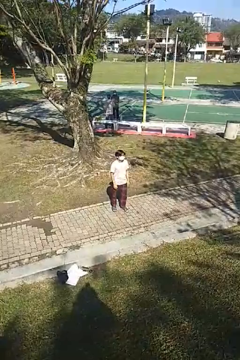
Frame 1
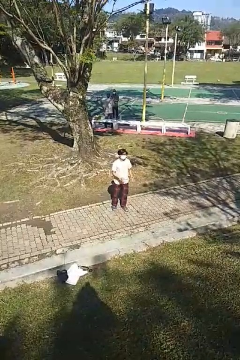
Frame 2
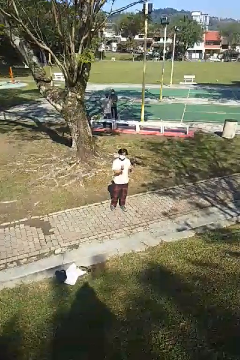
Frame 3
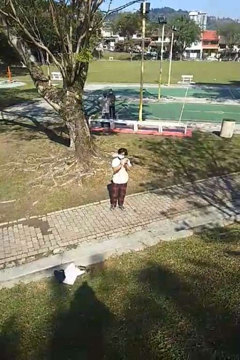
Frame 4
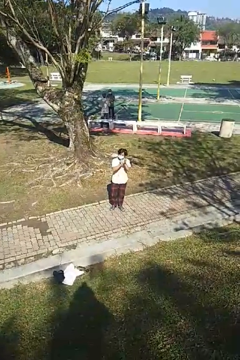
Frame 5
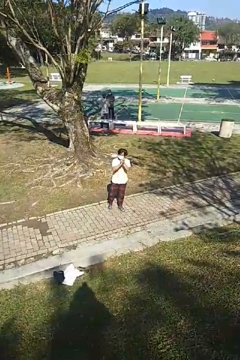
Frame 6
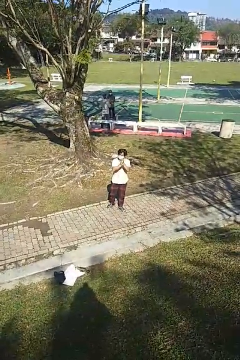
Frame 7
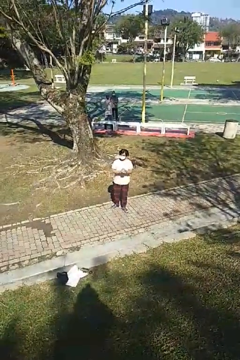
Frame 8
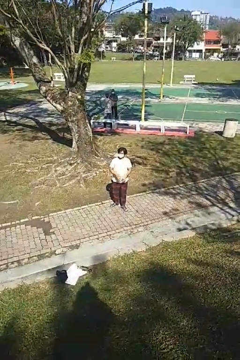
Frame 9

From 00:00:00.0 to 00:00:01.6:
person claps hands

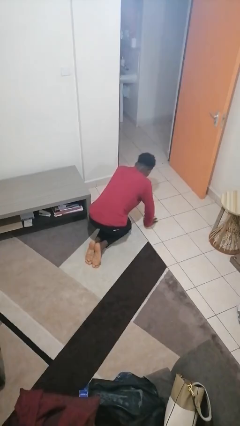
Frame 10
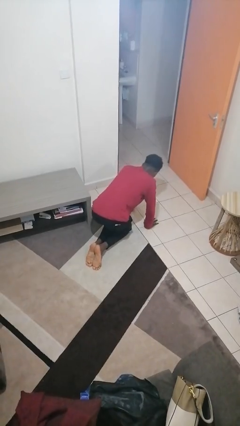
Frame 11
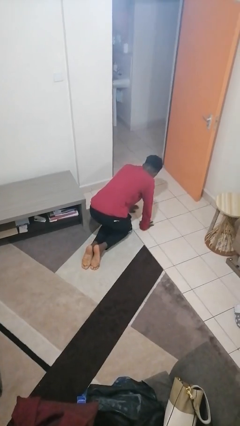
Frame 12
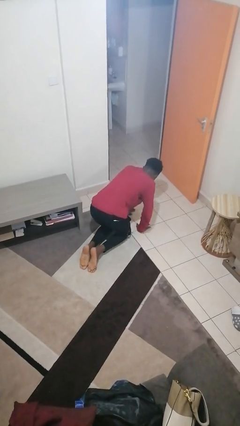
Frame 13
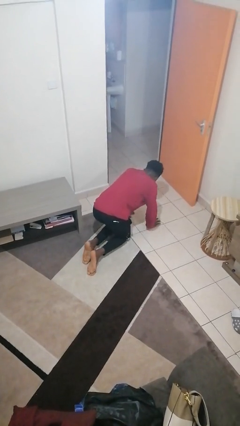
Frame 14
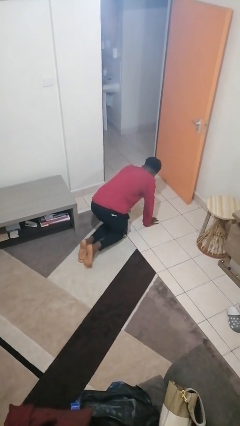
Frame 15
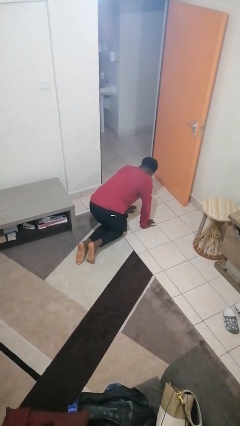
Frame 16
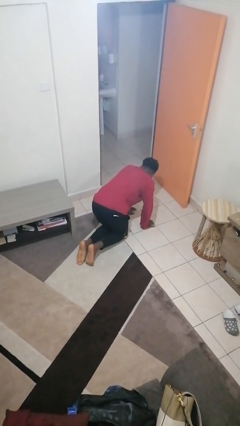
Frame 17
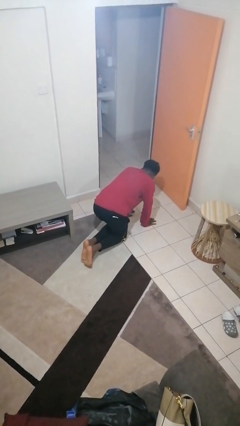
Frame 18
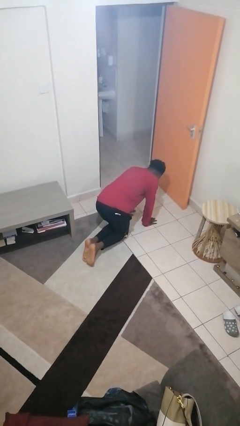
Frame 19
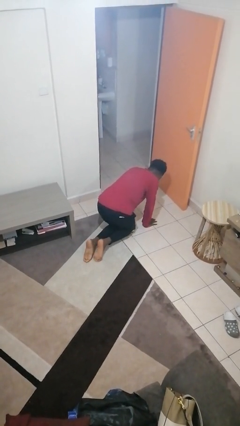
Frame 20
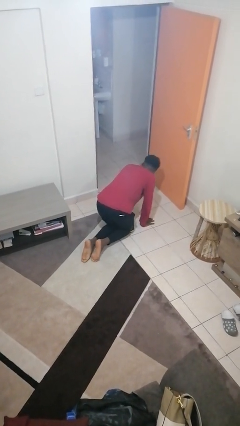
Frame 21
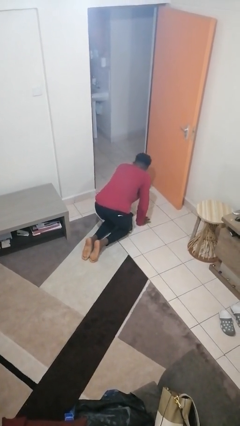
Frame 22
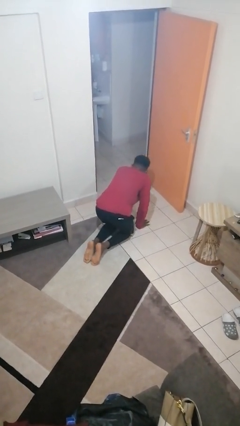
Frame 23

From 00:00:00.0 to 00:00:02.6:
person crawls

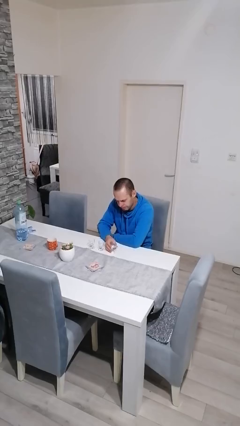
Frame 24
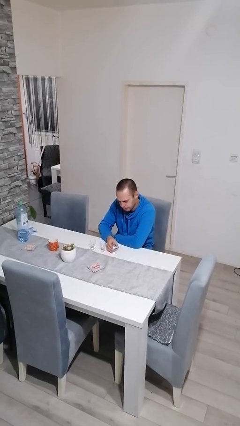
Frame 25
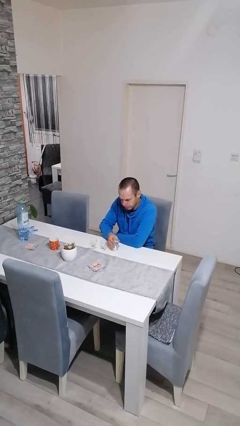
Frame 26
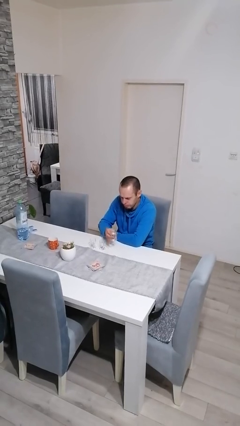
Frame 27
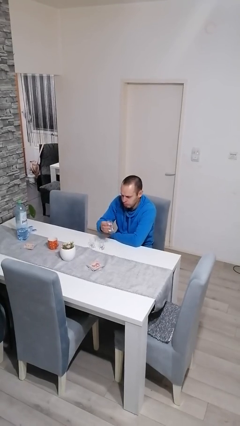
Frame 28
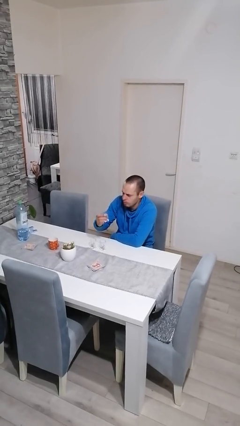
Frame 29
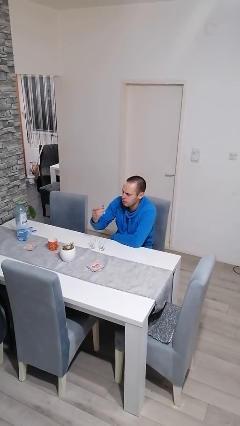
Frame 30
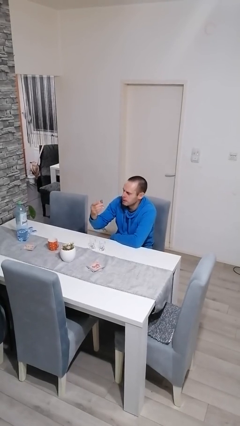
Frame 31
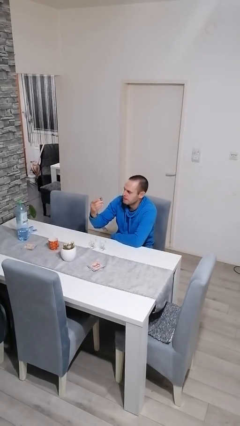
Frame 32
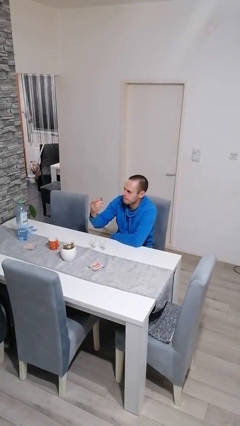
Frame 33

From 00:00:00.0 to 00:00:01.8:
person picks up object from table

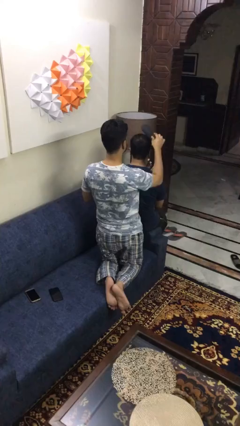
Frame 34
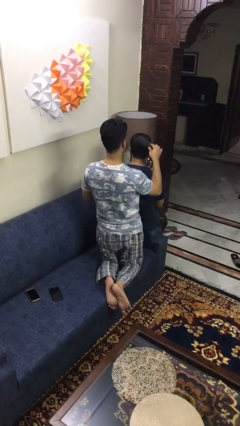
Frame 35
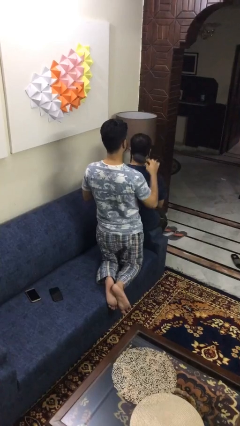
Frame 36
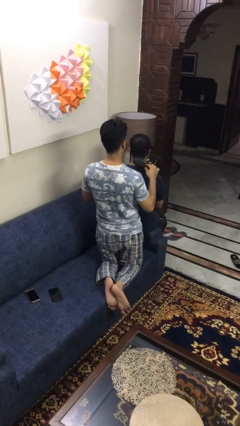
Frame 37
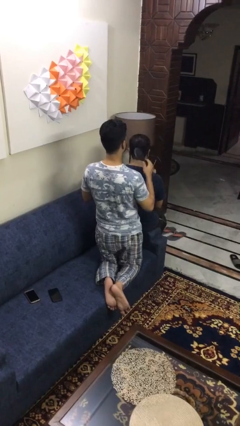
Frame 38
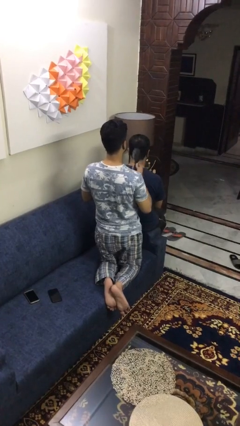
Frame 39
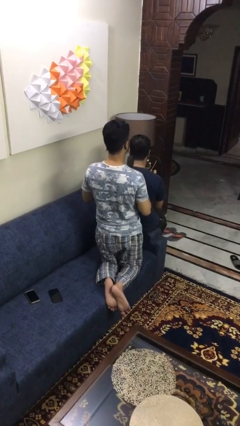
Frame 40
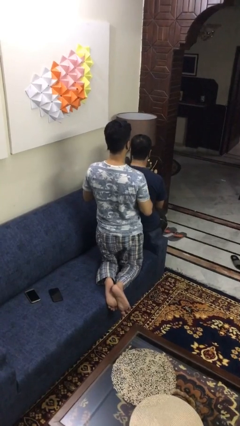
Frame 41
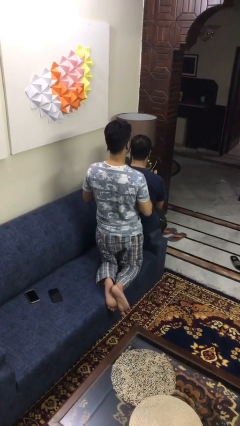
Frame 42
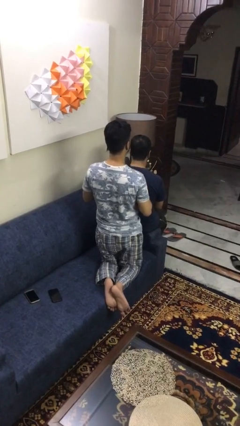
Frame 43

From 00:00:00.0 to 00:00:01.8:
person brushes hair of person

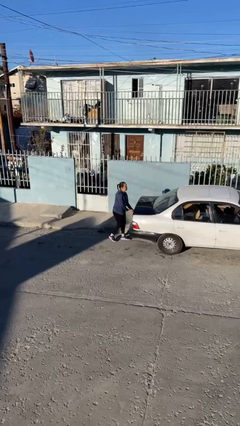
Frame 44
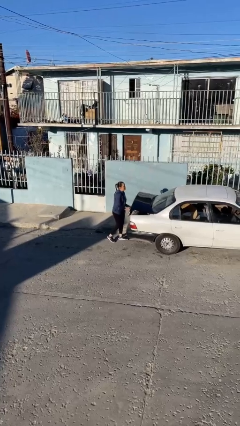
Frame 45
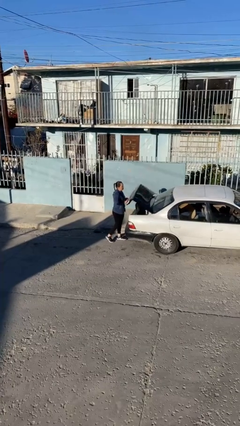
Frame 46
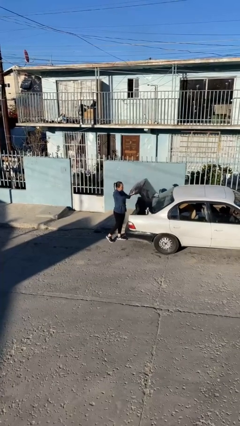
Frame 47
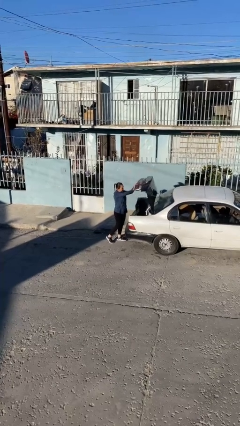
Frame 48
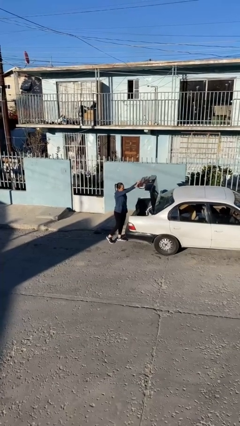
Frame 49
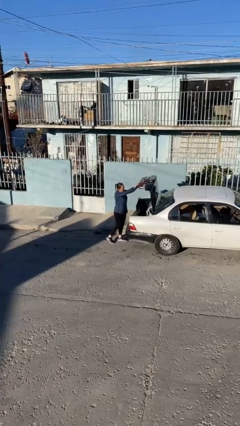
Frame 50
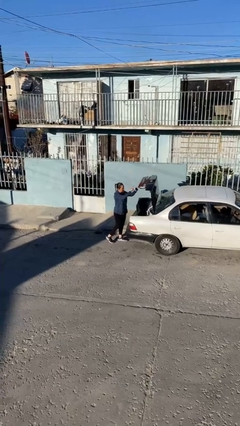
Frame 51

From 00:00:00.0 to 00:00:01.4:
person opens car trunk

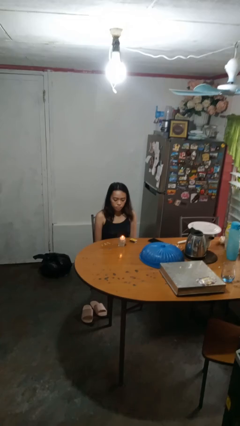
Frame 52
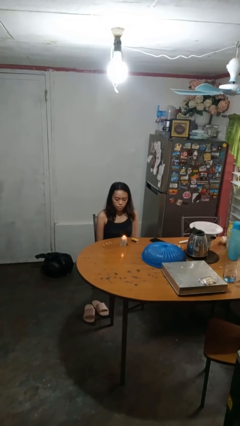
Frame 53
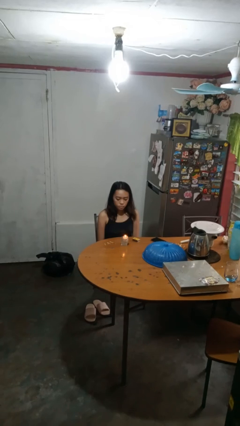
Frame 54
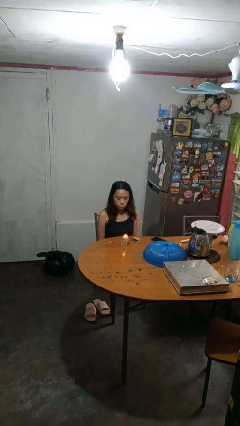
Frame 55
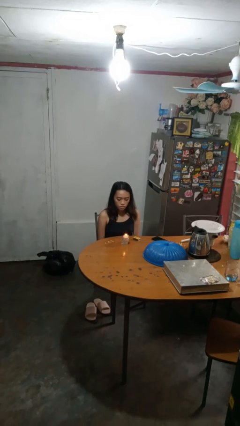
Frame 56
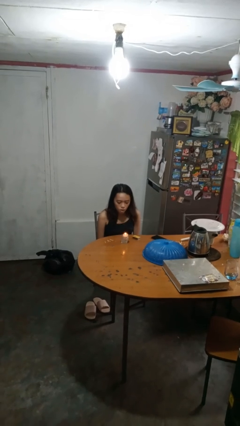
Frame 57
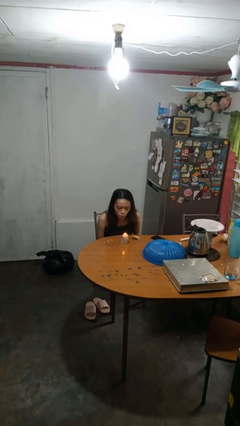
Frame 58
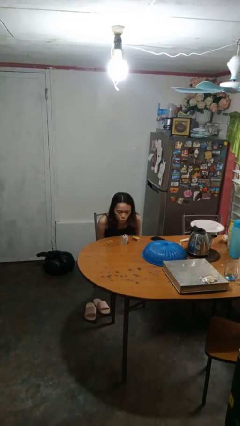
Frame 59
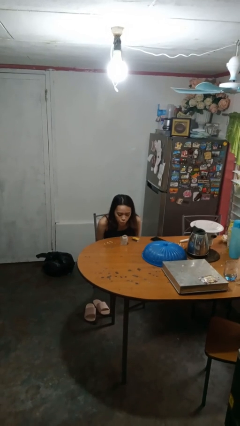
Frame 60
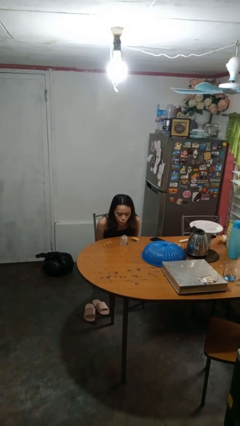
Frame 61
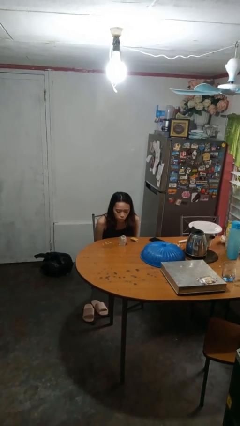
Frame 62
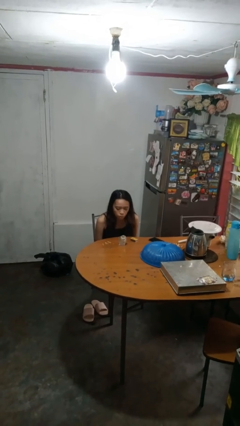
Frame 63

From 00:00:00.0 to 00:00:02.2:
person extinguishes candle

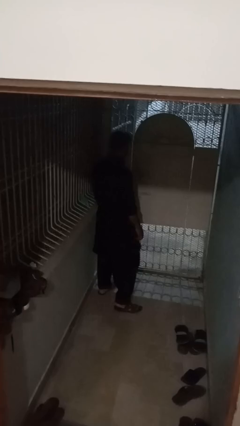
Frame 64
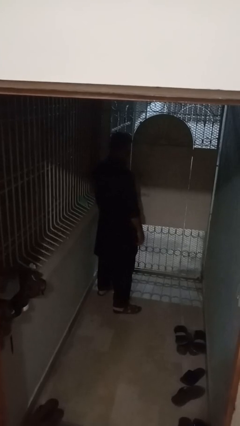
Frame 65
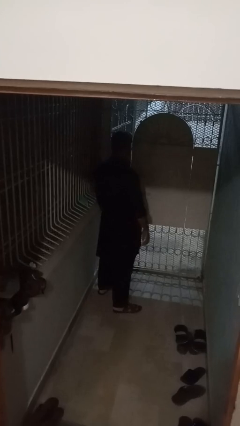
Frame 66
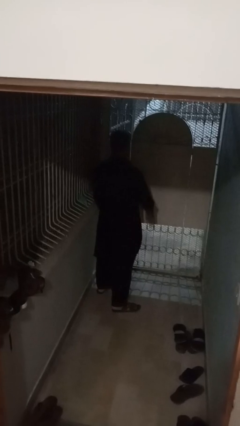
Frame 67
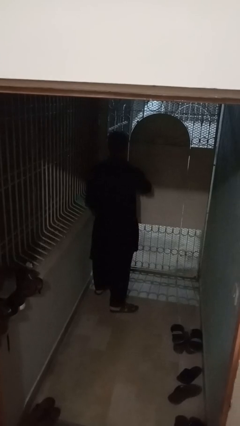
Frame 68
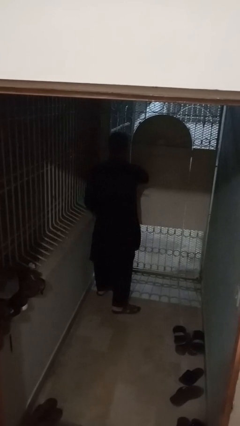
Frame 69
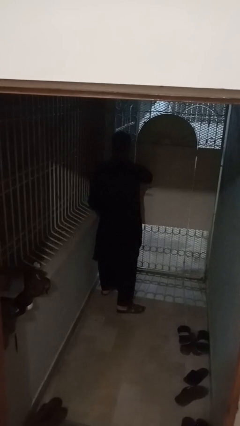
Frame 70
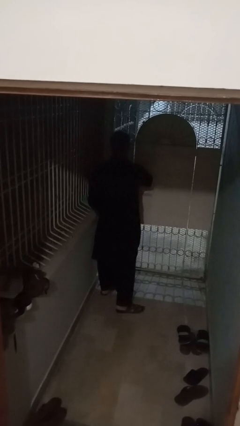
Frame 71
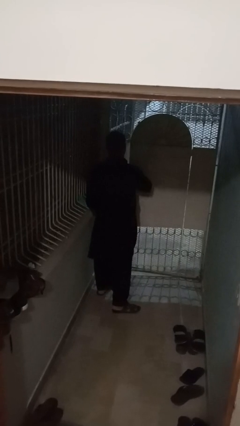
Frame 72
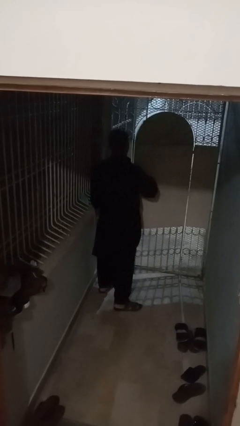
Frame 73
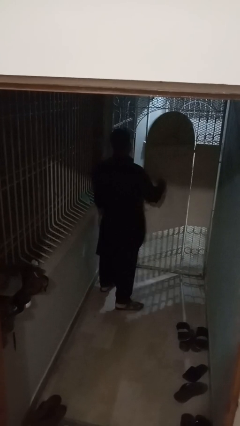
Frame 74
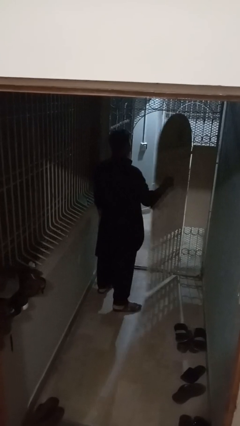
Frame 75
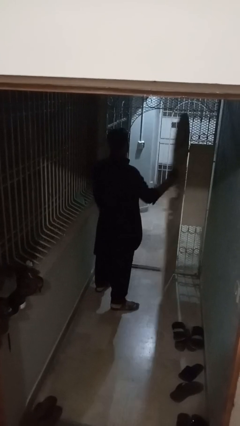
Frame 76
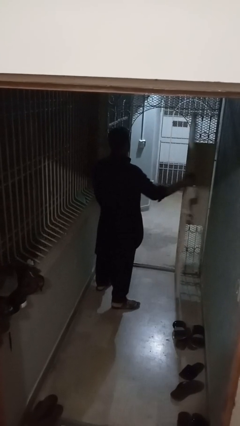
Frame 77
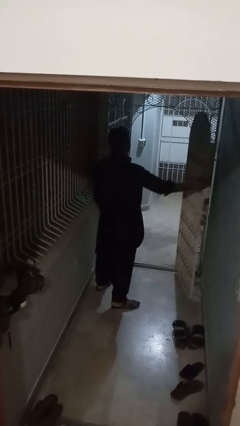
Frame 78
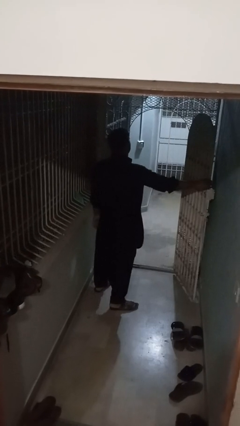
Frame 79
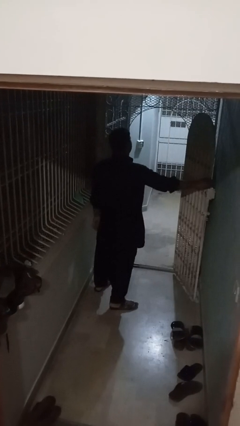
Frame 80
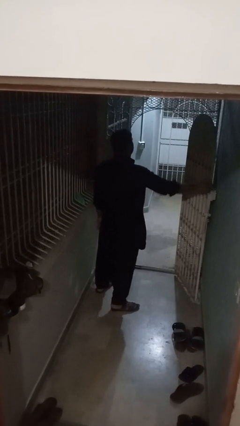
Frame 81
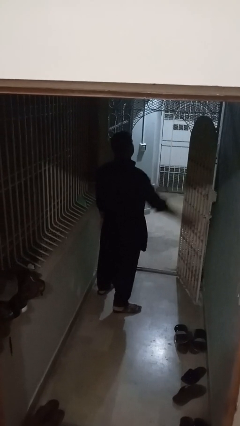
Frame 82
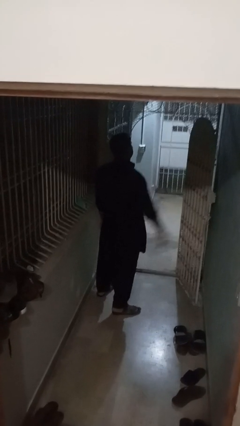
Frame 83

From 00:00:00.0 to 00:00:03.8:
person opens gate

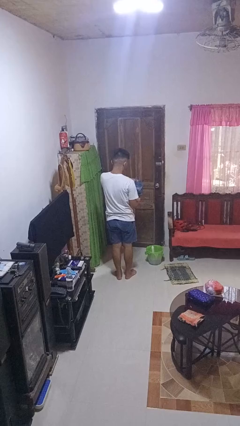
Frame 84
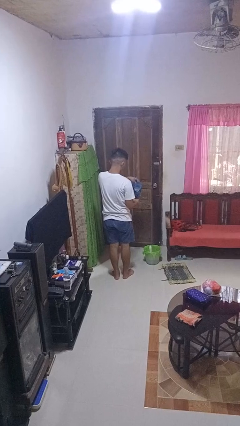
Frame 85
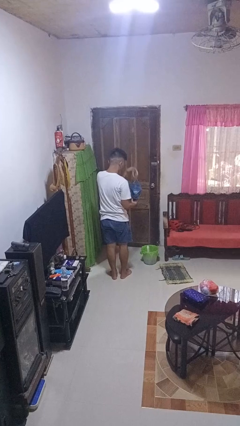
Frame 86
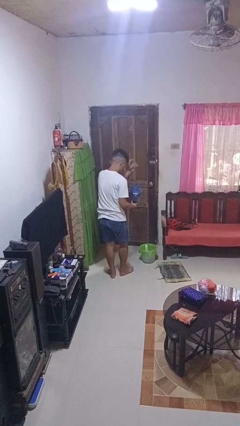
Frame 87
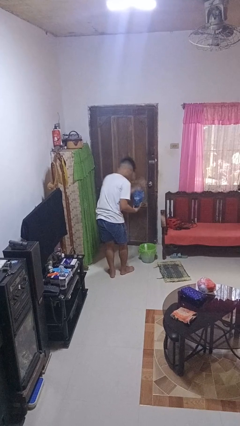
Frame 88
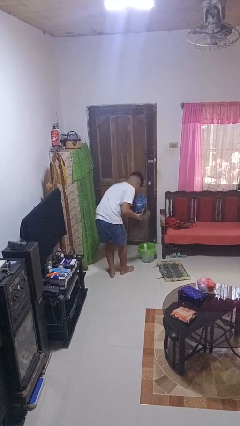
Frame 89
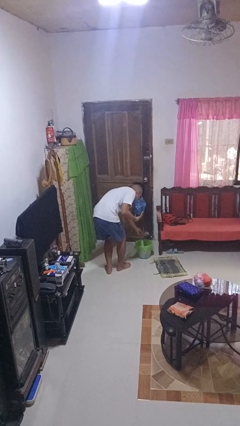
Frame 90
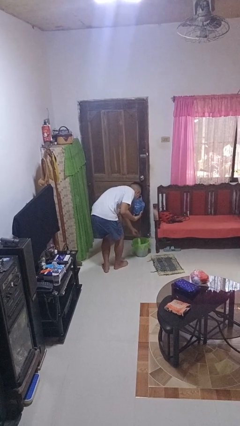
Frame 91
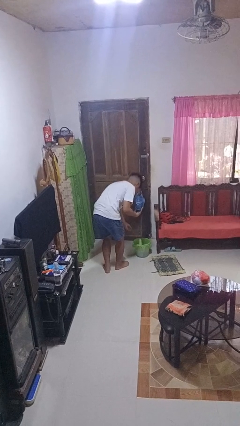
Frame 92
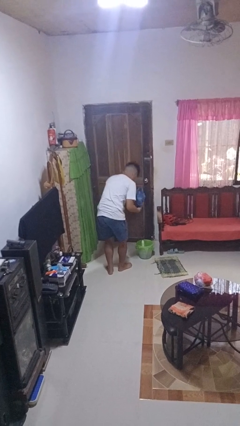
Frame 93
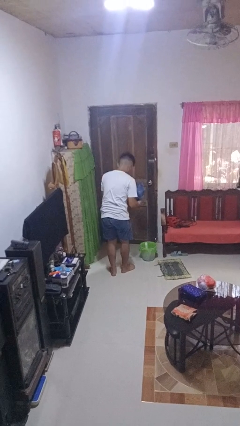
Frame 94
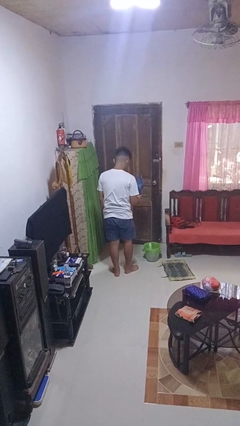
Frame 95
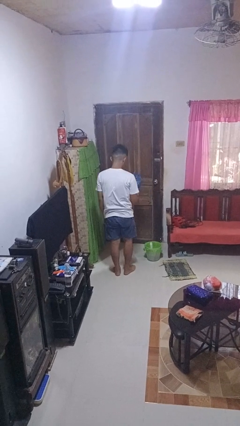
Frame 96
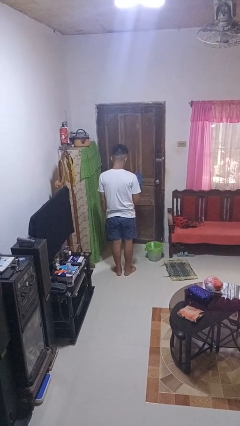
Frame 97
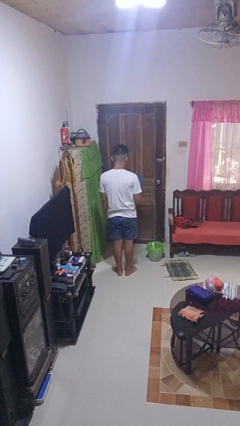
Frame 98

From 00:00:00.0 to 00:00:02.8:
person discards trash
